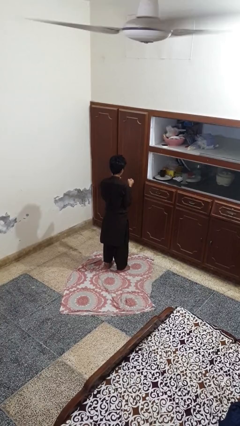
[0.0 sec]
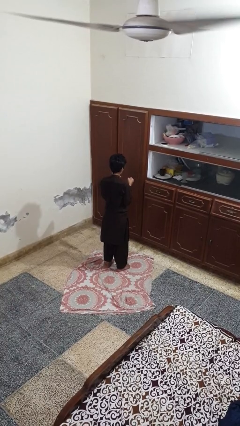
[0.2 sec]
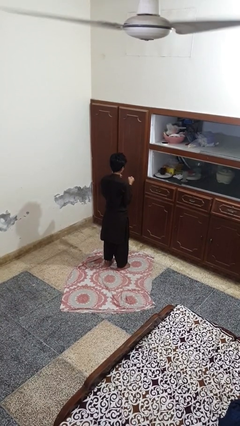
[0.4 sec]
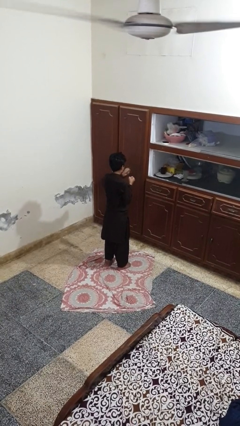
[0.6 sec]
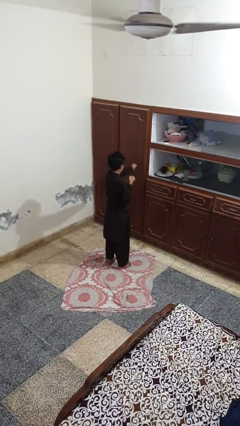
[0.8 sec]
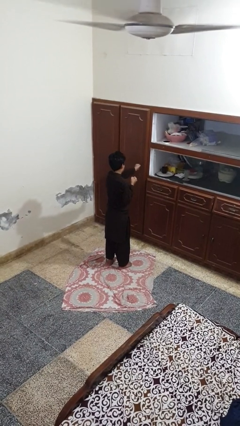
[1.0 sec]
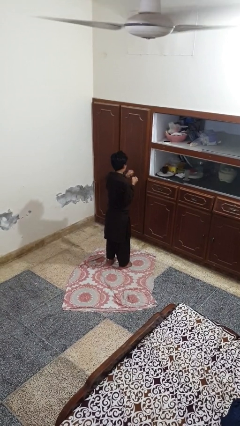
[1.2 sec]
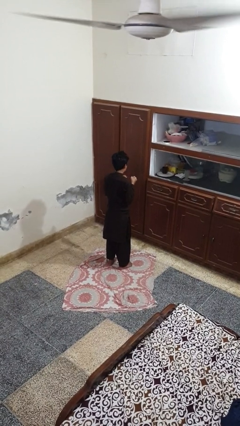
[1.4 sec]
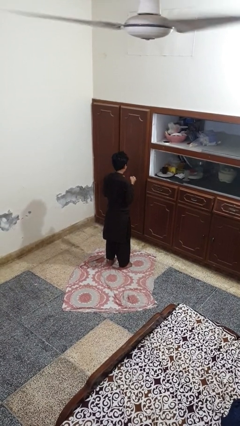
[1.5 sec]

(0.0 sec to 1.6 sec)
person punches

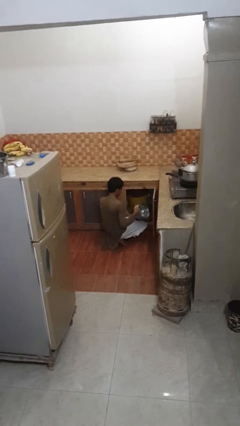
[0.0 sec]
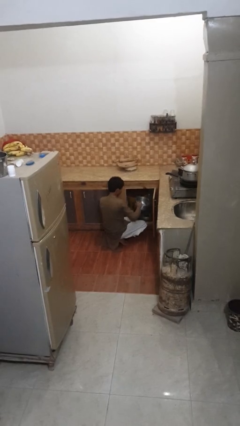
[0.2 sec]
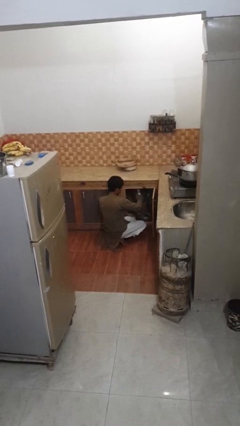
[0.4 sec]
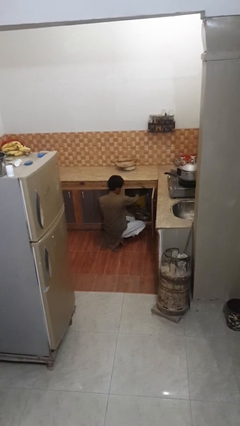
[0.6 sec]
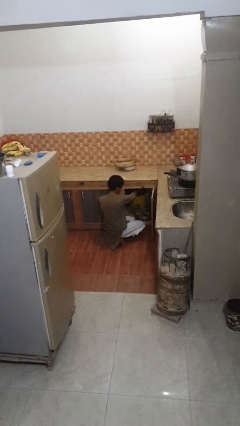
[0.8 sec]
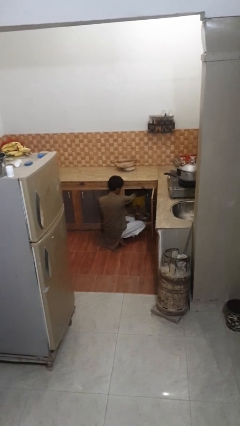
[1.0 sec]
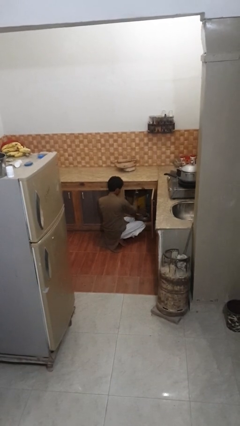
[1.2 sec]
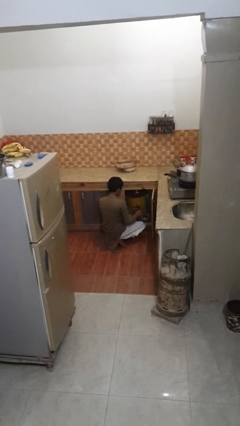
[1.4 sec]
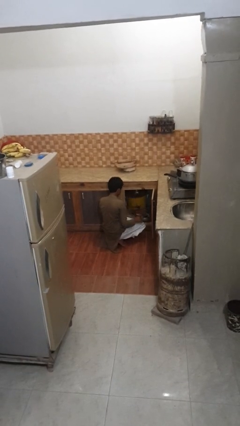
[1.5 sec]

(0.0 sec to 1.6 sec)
person puts object into kitchen drawer

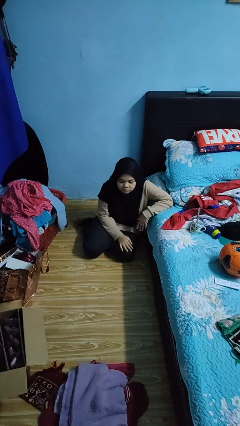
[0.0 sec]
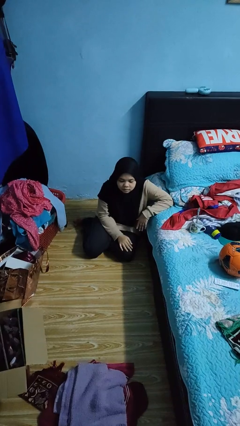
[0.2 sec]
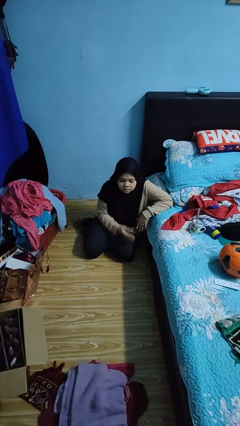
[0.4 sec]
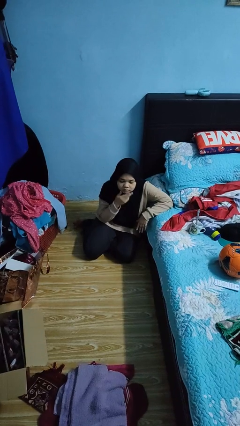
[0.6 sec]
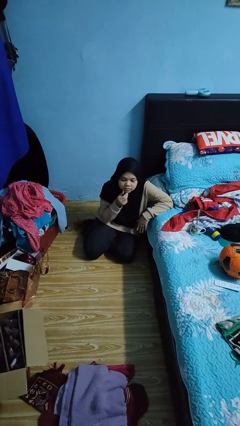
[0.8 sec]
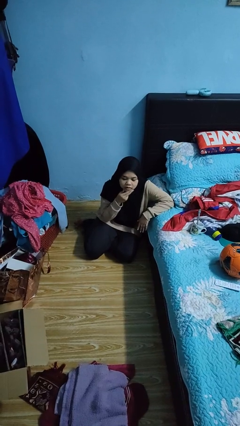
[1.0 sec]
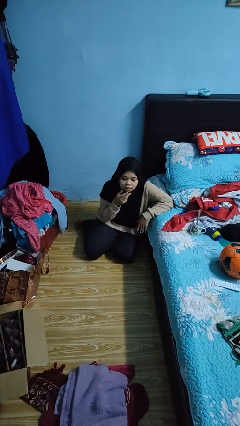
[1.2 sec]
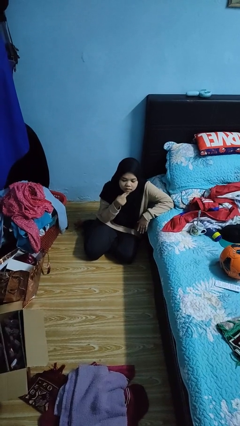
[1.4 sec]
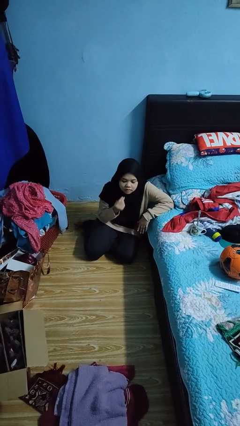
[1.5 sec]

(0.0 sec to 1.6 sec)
person strokes chin

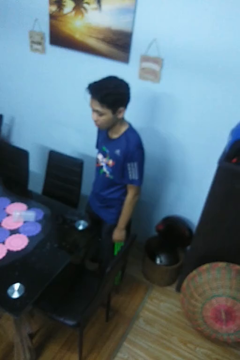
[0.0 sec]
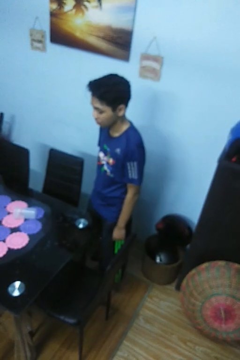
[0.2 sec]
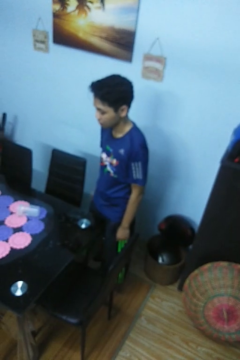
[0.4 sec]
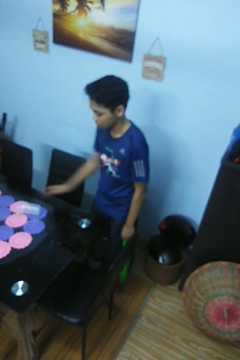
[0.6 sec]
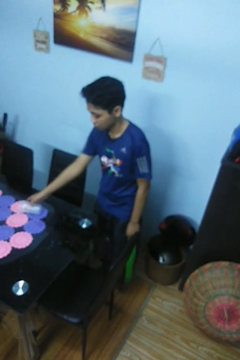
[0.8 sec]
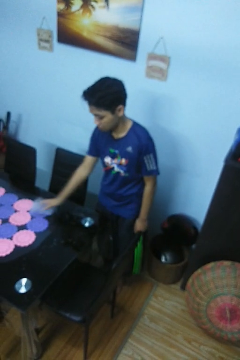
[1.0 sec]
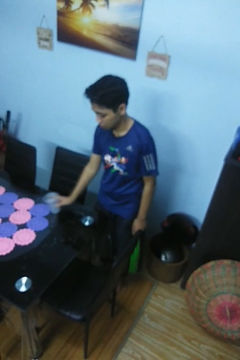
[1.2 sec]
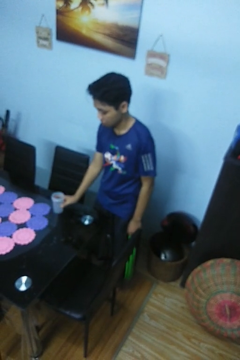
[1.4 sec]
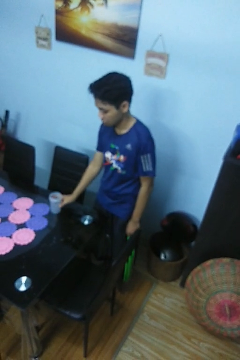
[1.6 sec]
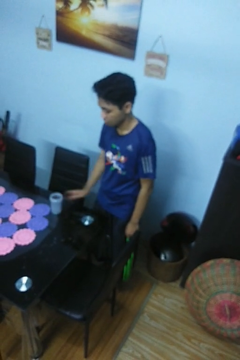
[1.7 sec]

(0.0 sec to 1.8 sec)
person sets upright glass

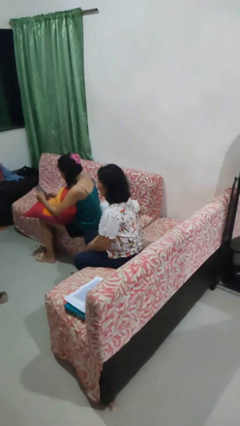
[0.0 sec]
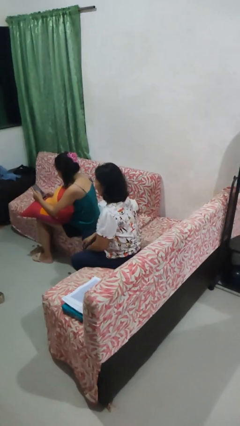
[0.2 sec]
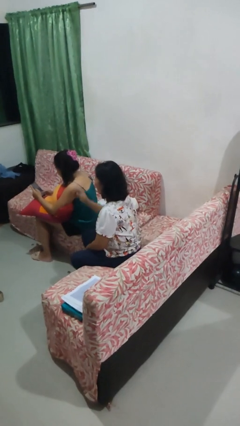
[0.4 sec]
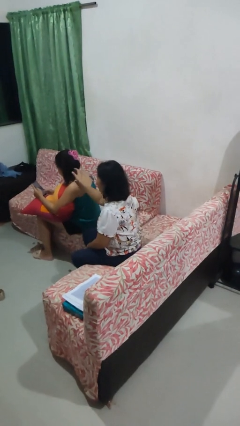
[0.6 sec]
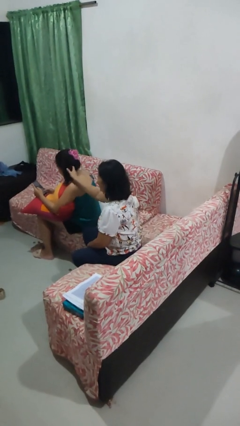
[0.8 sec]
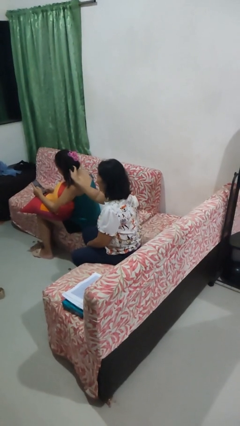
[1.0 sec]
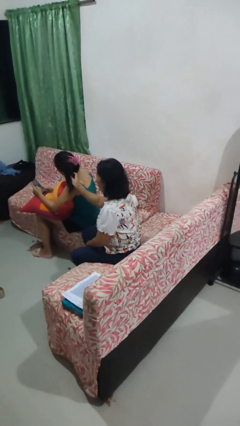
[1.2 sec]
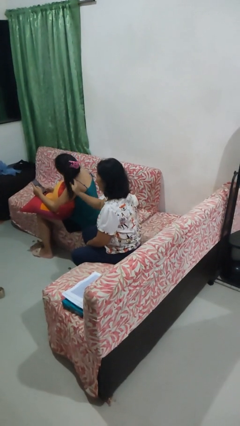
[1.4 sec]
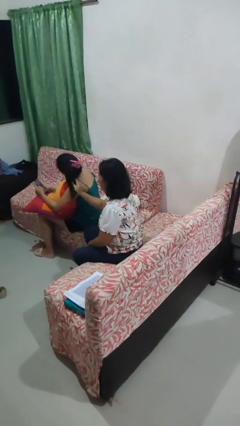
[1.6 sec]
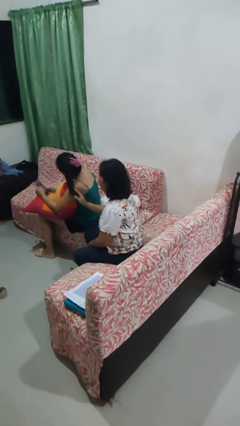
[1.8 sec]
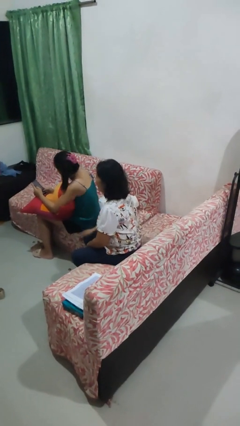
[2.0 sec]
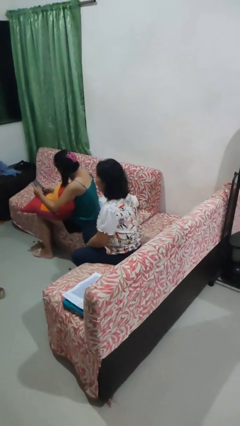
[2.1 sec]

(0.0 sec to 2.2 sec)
person grabs person by hair

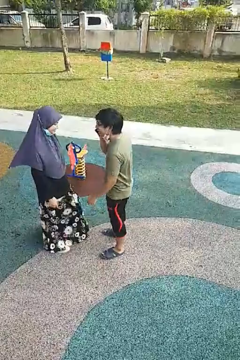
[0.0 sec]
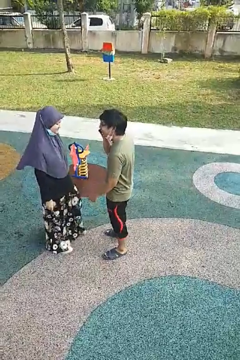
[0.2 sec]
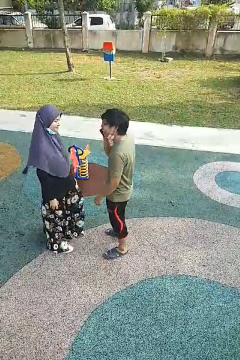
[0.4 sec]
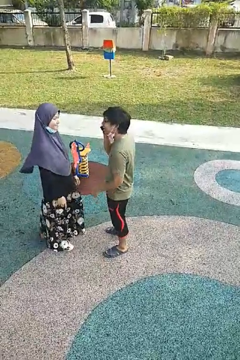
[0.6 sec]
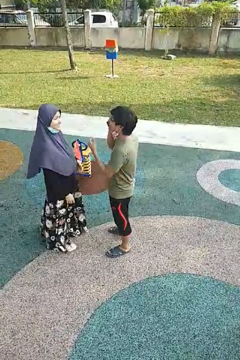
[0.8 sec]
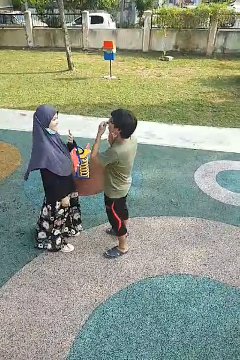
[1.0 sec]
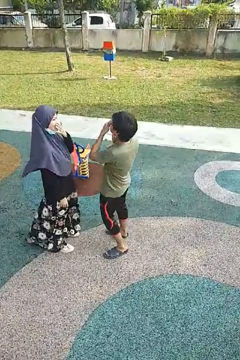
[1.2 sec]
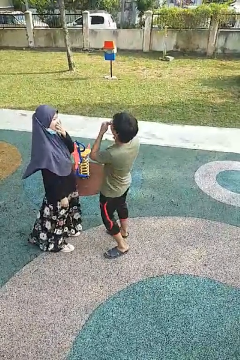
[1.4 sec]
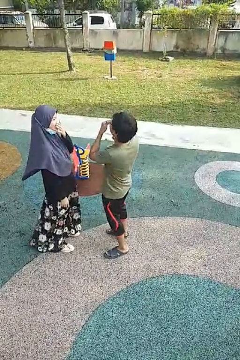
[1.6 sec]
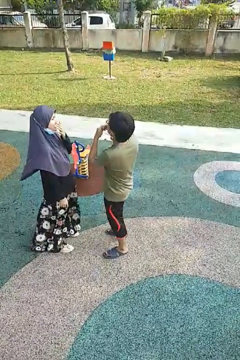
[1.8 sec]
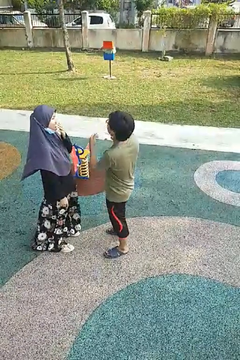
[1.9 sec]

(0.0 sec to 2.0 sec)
person laughs with person

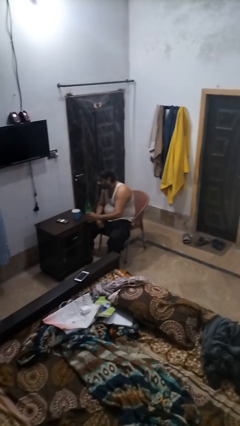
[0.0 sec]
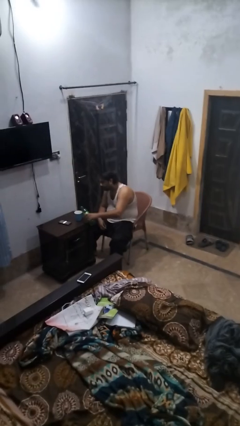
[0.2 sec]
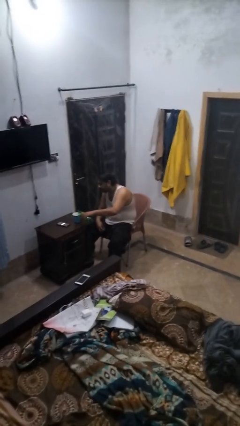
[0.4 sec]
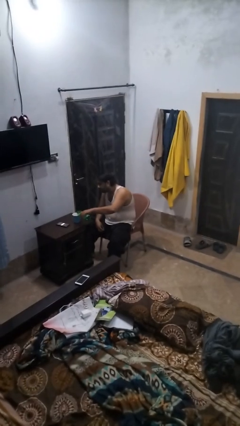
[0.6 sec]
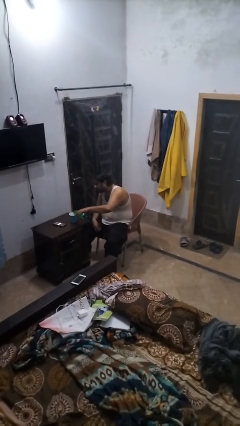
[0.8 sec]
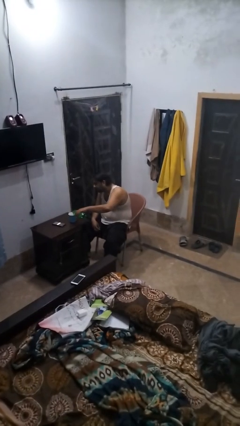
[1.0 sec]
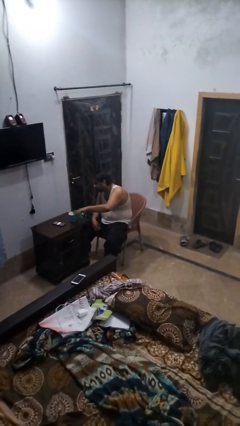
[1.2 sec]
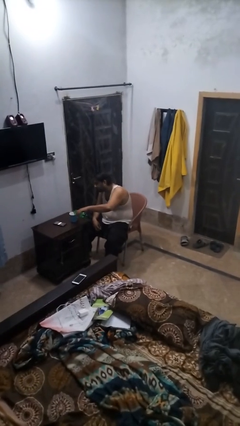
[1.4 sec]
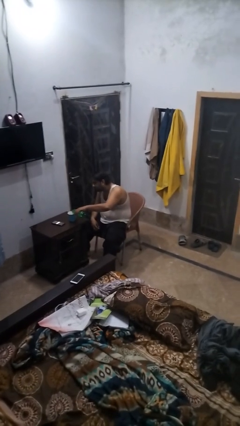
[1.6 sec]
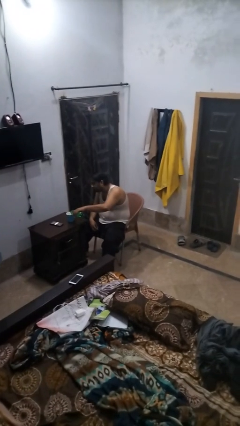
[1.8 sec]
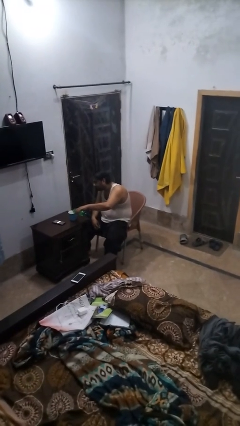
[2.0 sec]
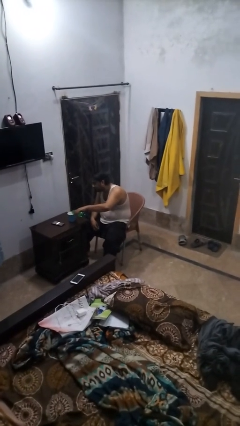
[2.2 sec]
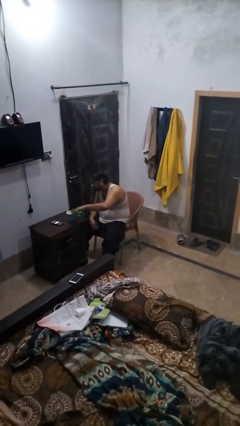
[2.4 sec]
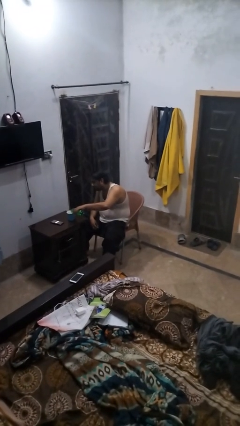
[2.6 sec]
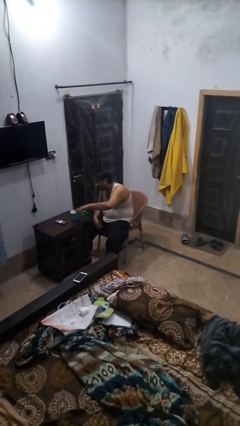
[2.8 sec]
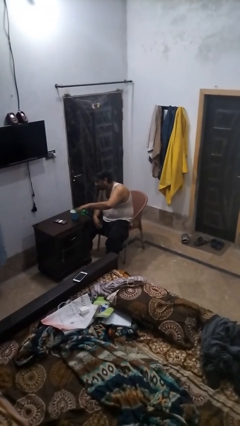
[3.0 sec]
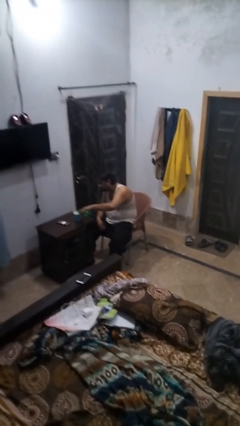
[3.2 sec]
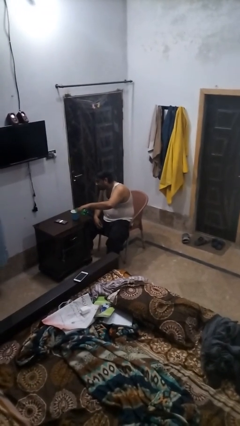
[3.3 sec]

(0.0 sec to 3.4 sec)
person pours liquid into cup

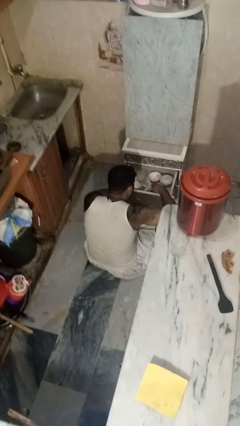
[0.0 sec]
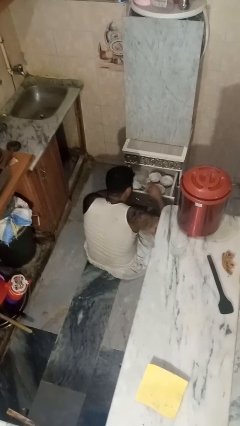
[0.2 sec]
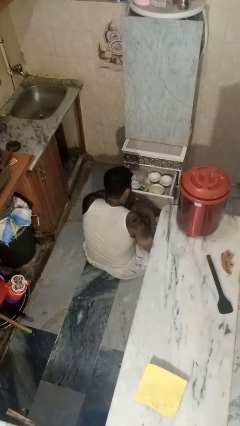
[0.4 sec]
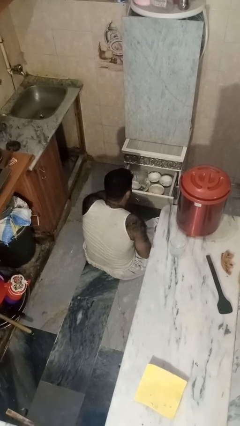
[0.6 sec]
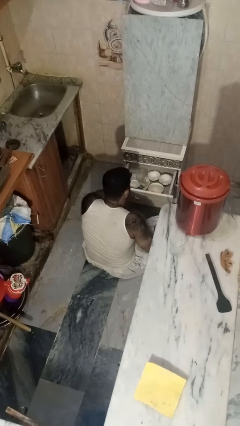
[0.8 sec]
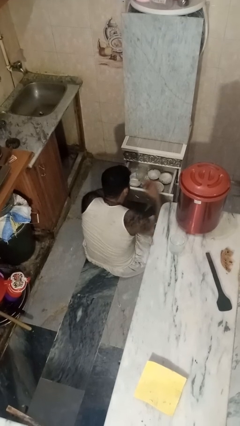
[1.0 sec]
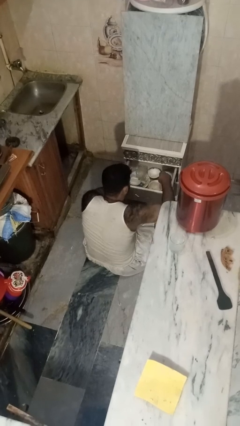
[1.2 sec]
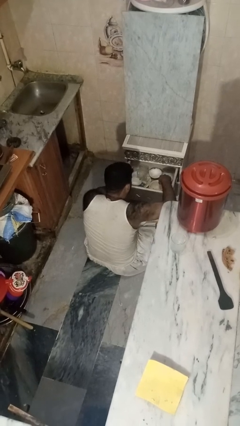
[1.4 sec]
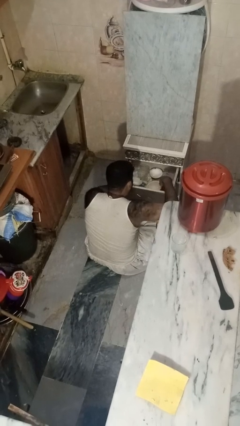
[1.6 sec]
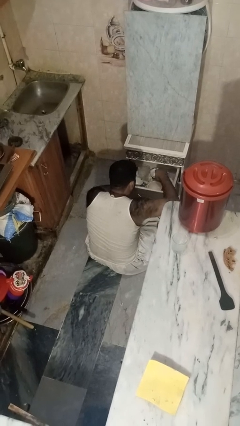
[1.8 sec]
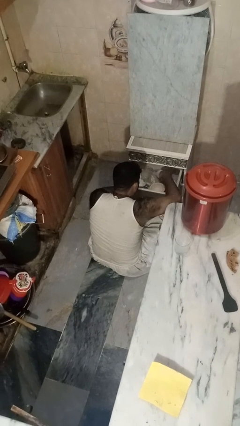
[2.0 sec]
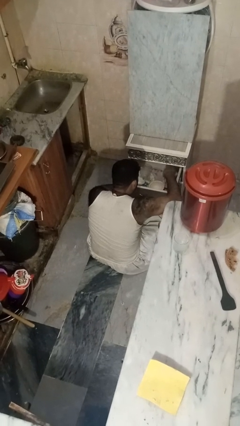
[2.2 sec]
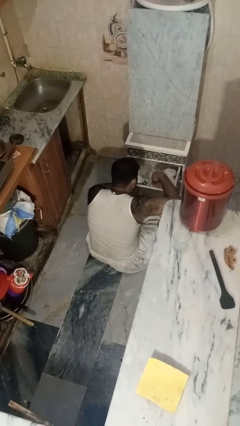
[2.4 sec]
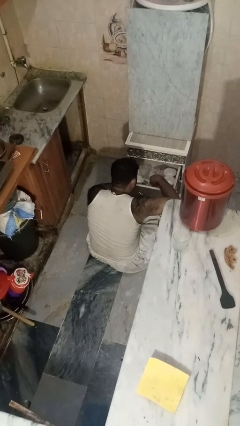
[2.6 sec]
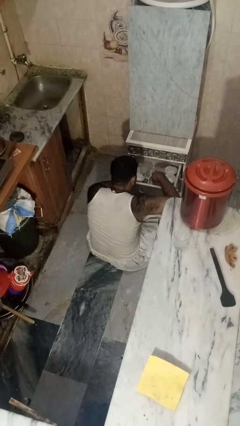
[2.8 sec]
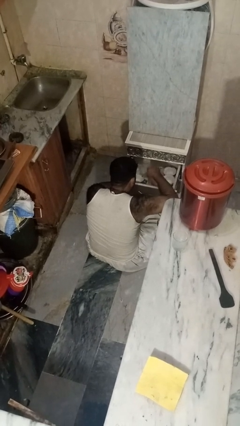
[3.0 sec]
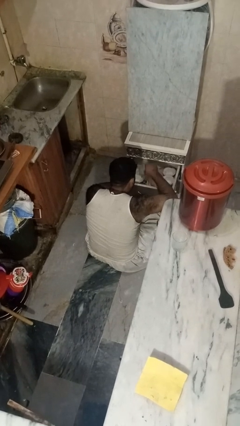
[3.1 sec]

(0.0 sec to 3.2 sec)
person searches in kitchen drawer

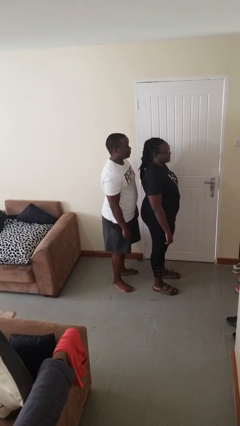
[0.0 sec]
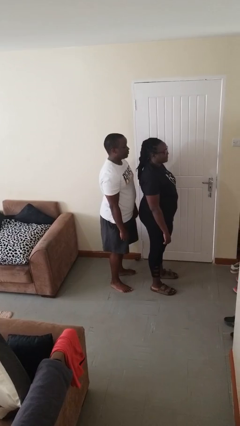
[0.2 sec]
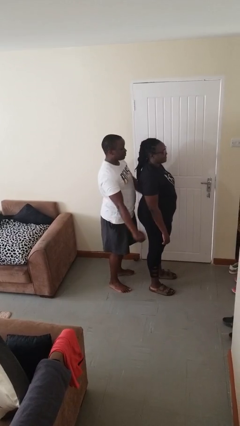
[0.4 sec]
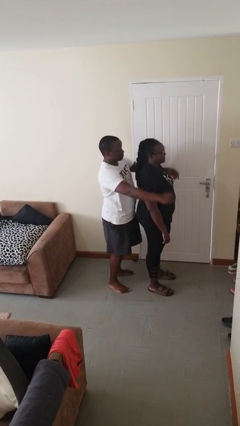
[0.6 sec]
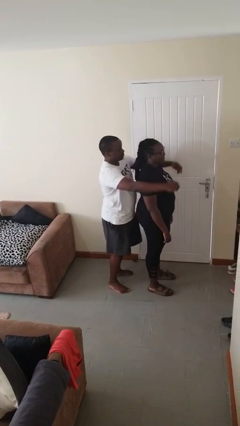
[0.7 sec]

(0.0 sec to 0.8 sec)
person hugs person from behind
